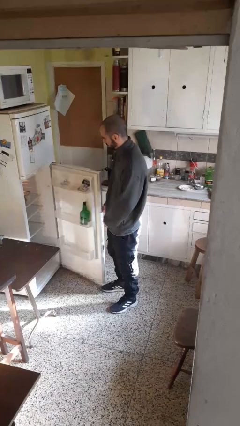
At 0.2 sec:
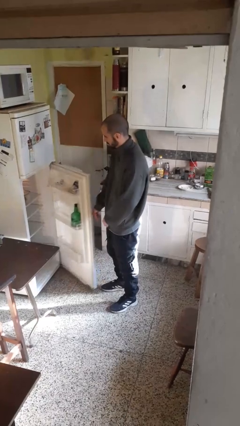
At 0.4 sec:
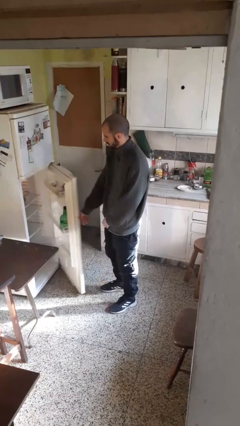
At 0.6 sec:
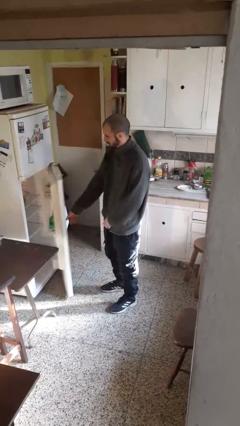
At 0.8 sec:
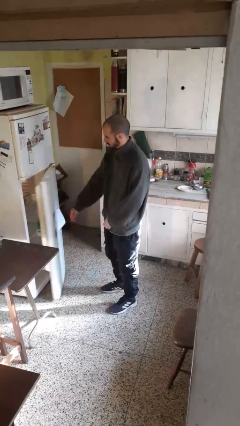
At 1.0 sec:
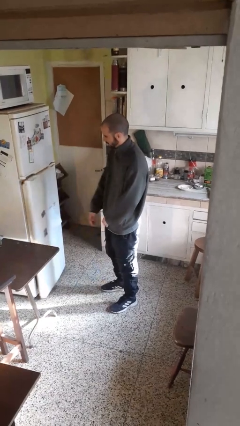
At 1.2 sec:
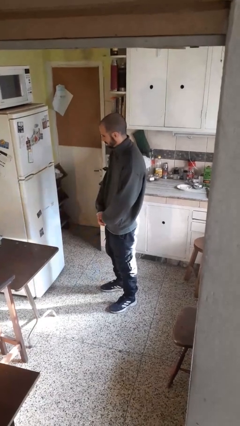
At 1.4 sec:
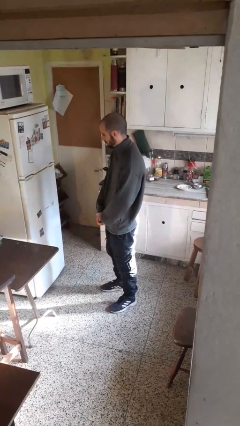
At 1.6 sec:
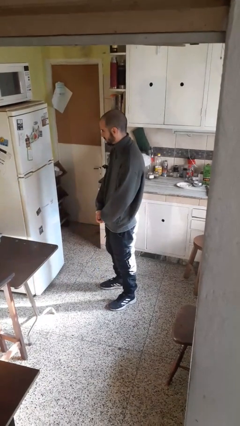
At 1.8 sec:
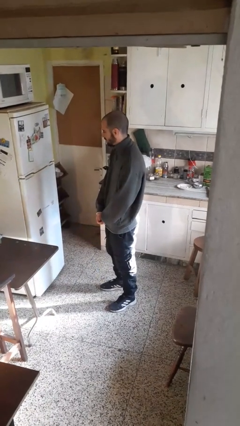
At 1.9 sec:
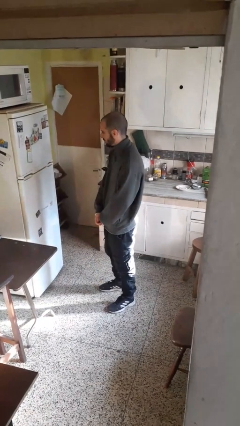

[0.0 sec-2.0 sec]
person closes refrigerator

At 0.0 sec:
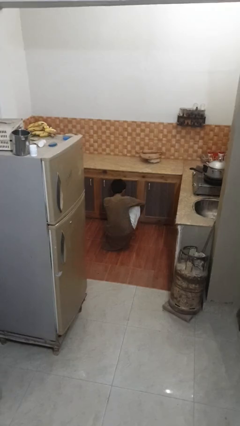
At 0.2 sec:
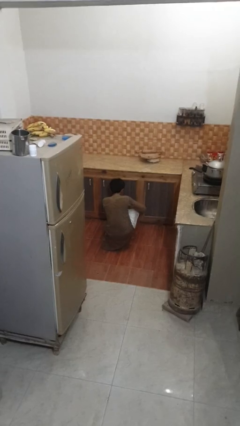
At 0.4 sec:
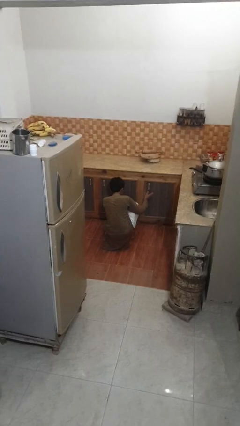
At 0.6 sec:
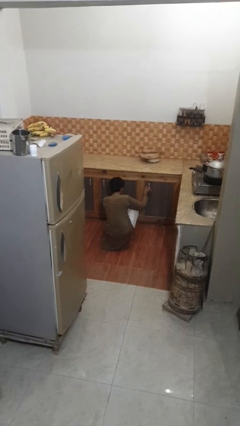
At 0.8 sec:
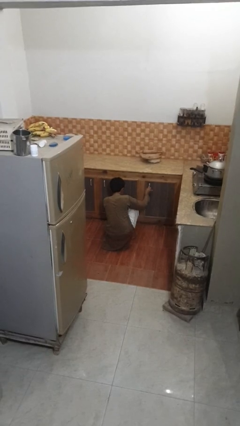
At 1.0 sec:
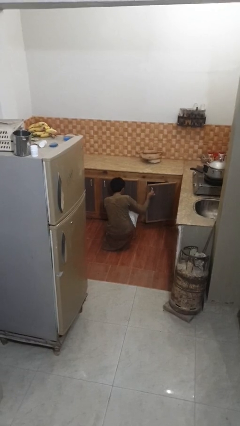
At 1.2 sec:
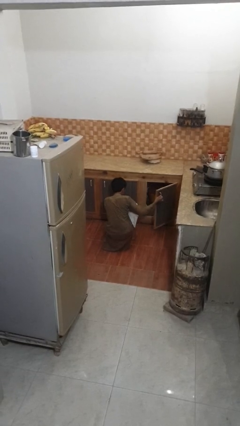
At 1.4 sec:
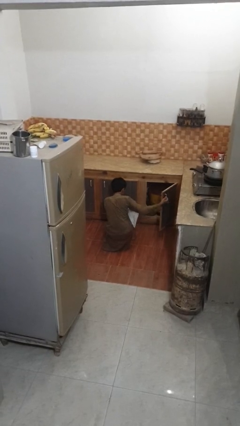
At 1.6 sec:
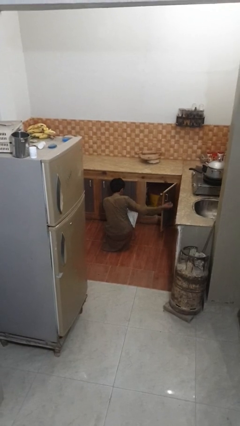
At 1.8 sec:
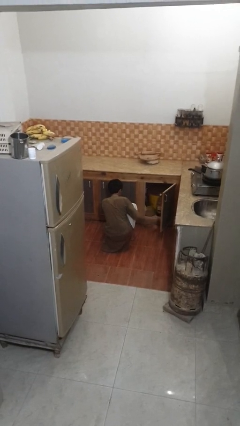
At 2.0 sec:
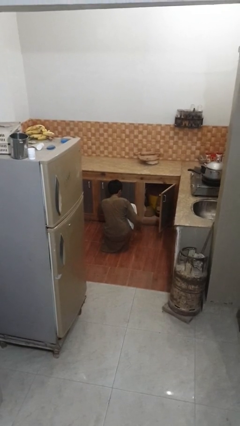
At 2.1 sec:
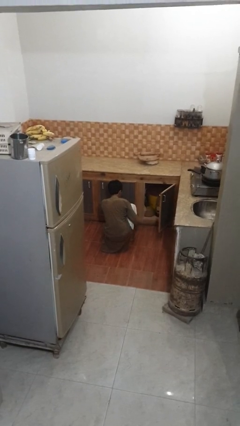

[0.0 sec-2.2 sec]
person opens kitchen drawer

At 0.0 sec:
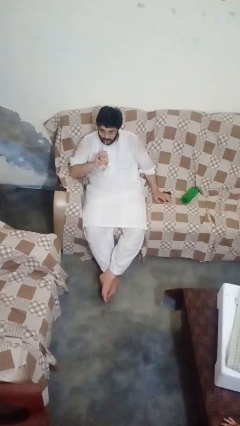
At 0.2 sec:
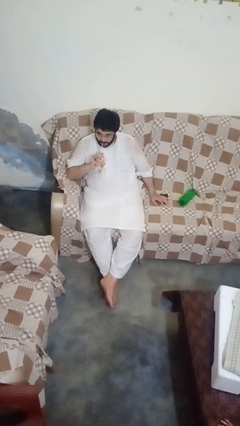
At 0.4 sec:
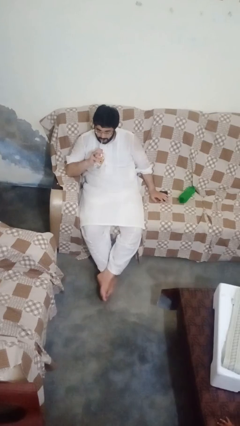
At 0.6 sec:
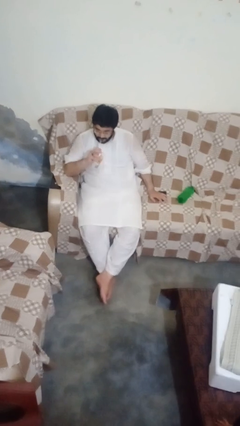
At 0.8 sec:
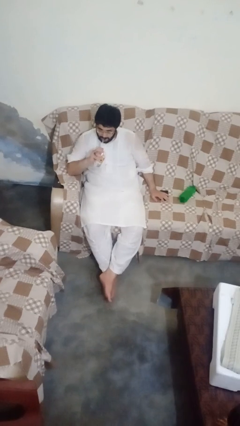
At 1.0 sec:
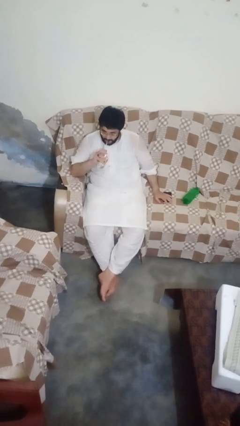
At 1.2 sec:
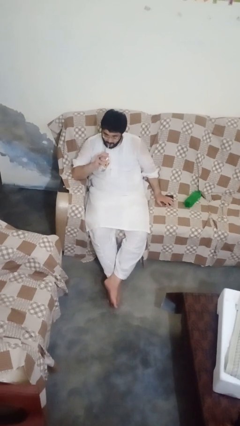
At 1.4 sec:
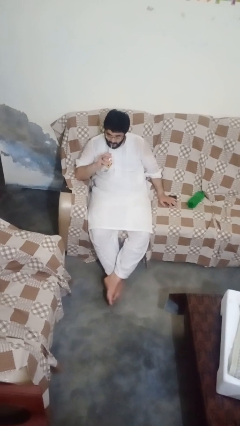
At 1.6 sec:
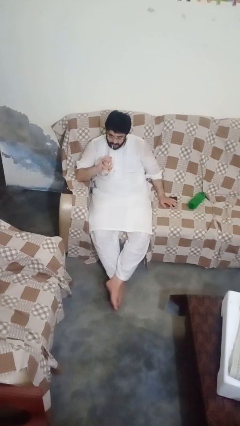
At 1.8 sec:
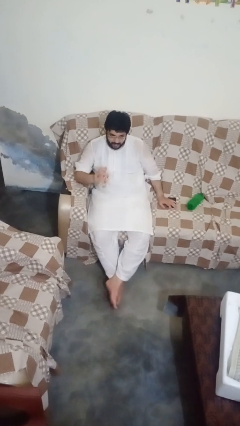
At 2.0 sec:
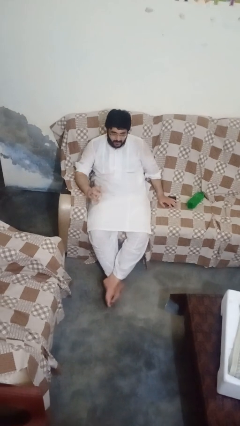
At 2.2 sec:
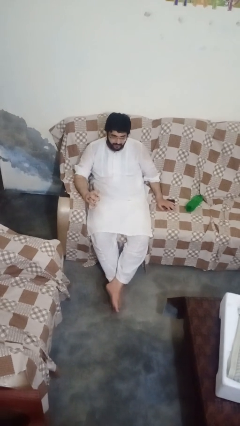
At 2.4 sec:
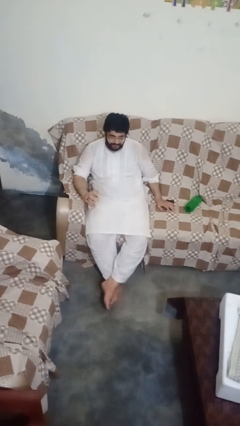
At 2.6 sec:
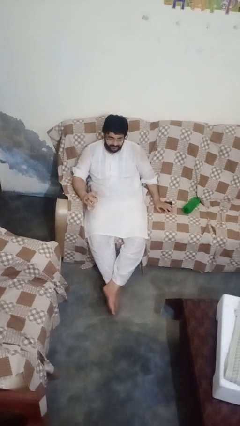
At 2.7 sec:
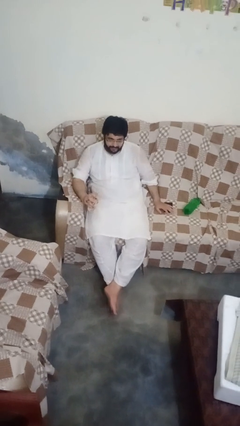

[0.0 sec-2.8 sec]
person drinks from straw

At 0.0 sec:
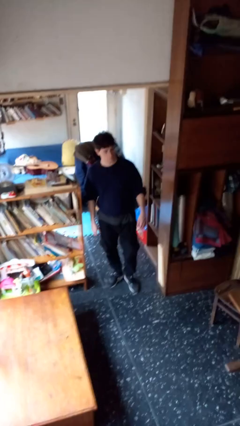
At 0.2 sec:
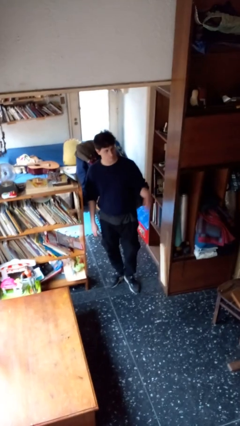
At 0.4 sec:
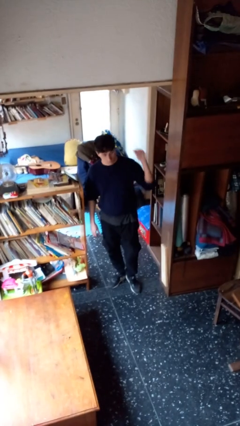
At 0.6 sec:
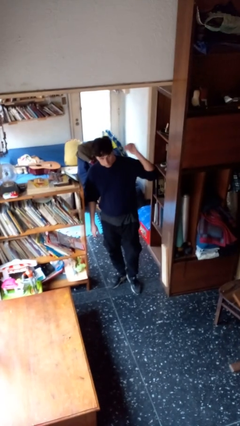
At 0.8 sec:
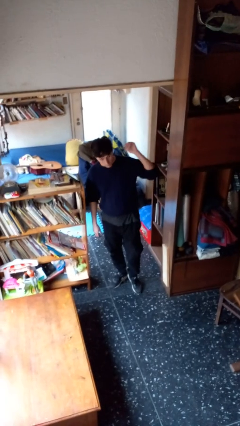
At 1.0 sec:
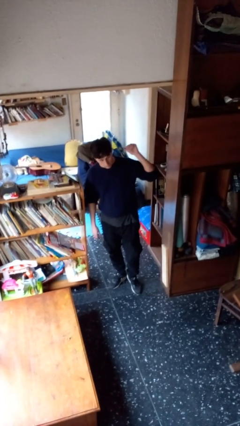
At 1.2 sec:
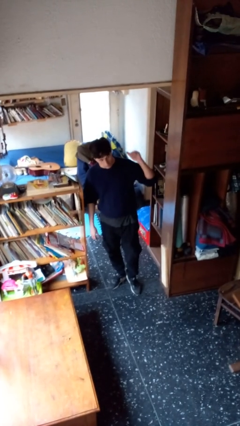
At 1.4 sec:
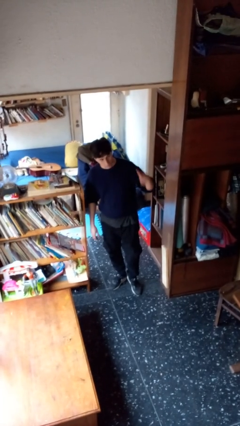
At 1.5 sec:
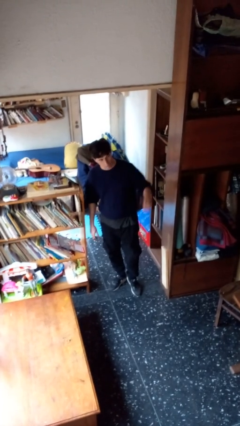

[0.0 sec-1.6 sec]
person gestures behind me

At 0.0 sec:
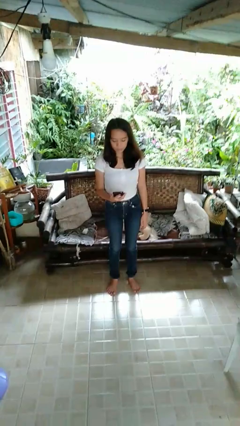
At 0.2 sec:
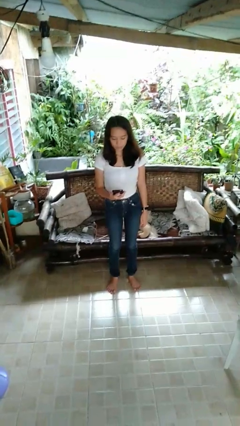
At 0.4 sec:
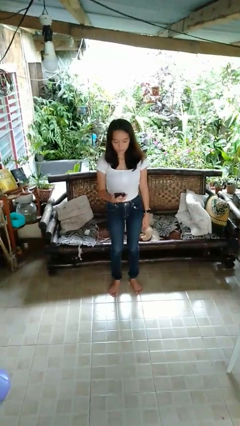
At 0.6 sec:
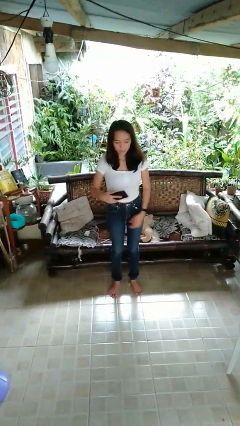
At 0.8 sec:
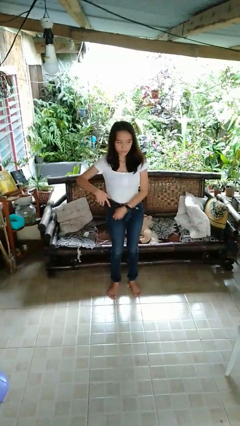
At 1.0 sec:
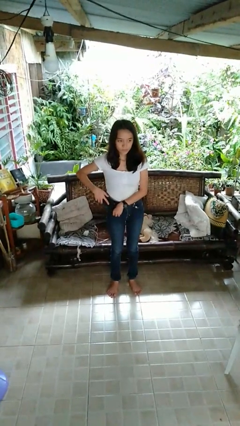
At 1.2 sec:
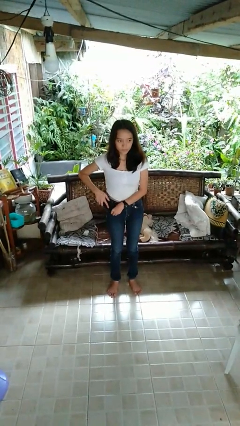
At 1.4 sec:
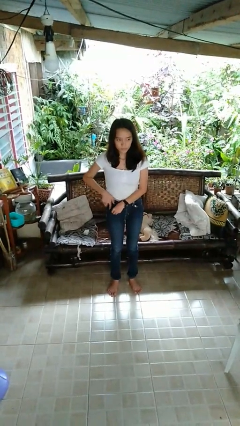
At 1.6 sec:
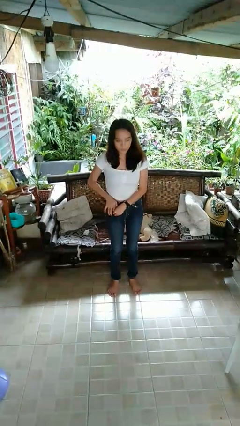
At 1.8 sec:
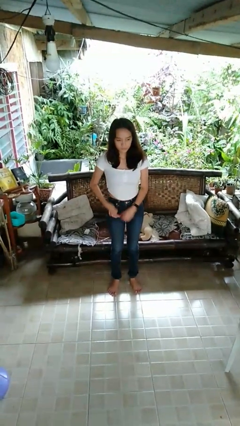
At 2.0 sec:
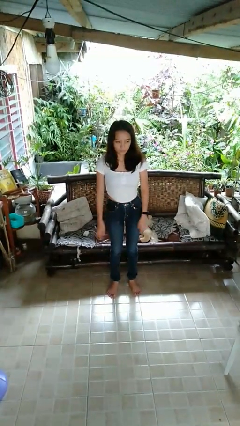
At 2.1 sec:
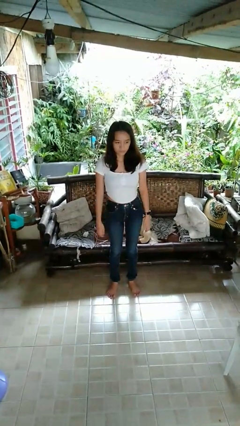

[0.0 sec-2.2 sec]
person puts phone into pocket

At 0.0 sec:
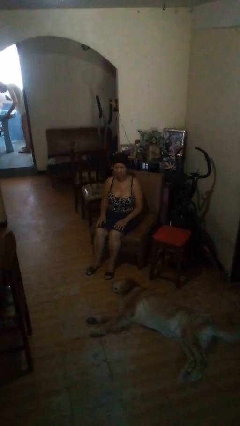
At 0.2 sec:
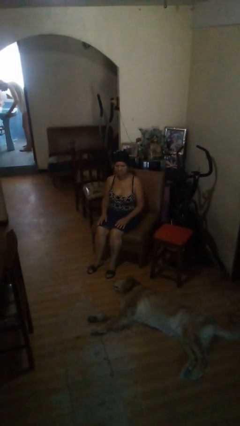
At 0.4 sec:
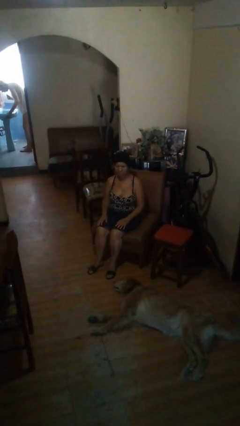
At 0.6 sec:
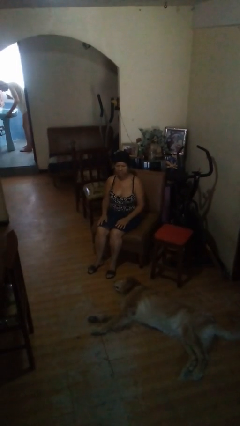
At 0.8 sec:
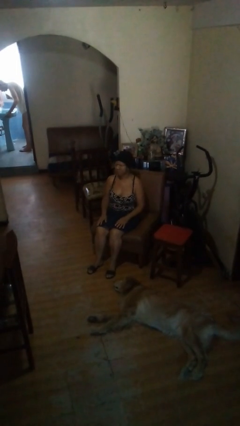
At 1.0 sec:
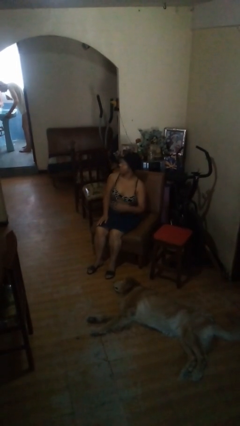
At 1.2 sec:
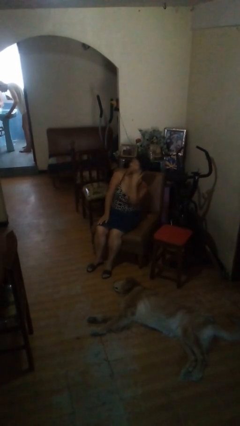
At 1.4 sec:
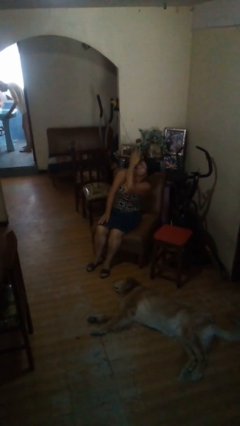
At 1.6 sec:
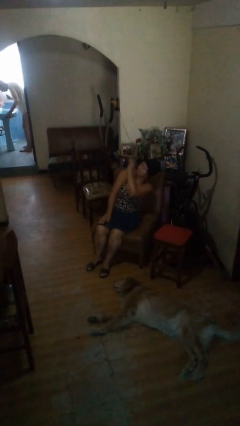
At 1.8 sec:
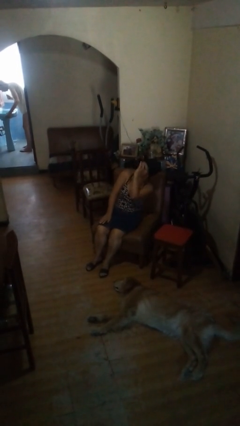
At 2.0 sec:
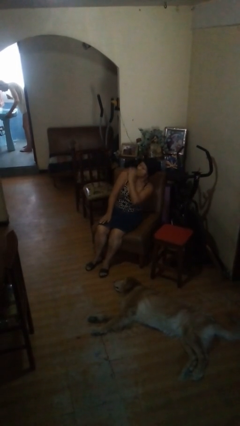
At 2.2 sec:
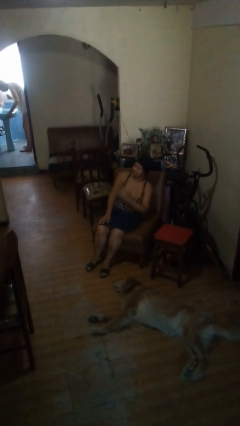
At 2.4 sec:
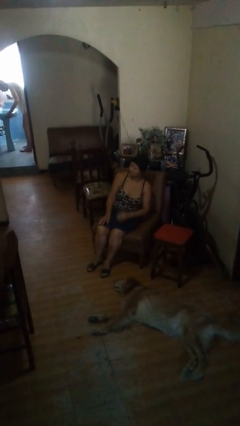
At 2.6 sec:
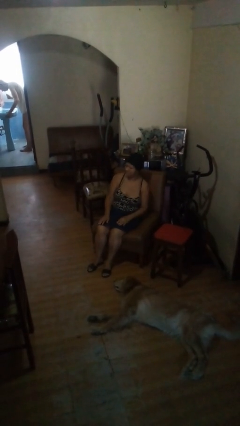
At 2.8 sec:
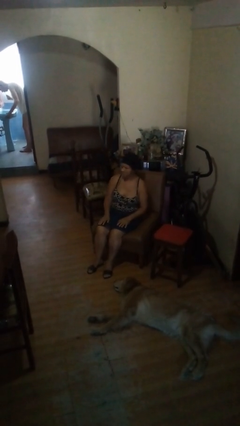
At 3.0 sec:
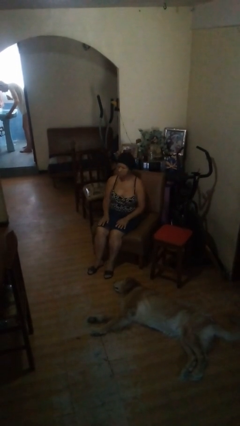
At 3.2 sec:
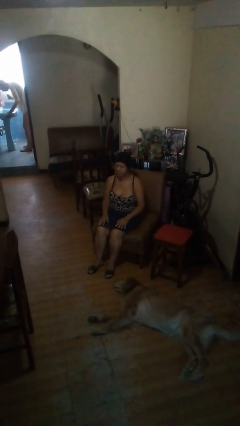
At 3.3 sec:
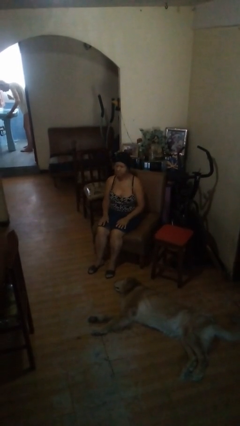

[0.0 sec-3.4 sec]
person swats bug

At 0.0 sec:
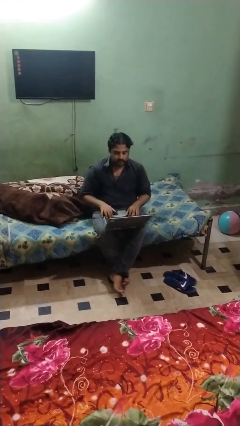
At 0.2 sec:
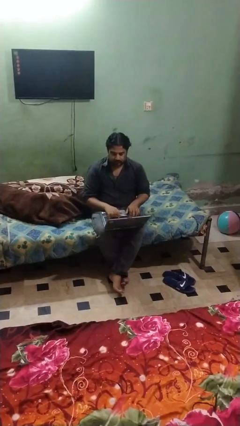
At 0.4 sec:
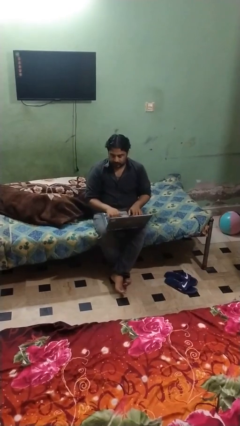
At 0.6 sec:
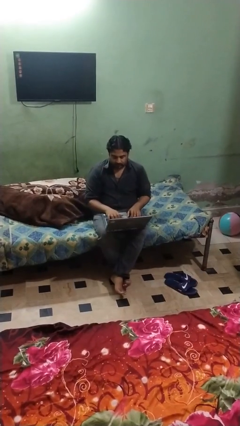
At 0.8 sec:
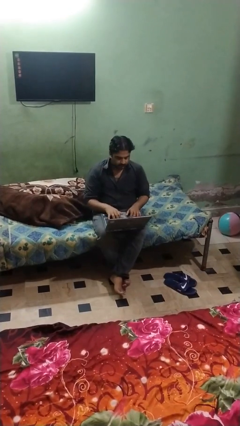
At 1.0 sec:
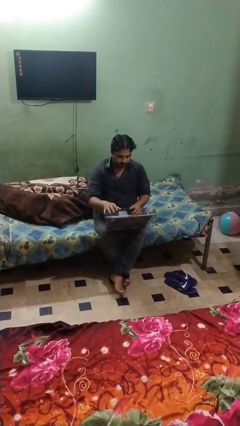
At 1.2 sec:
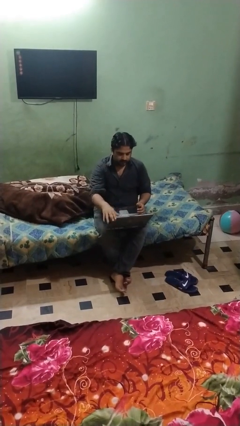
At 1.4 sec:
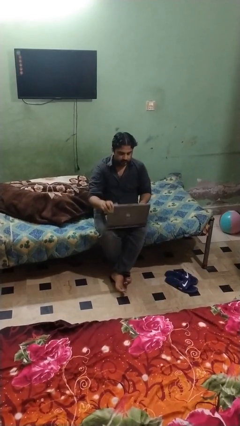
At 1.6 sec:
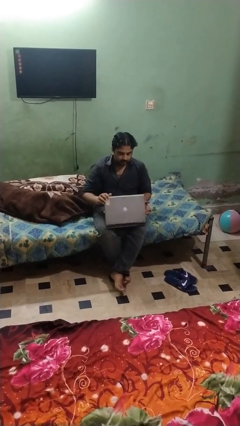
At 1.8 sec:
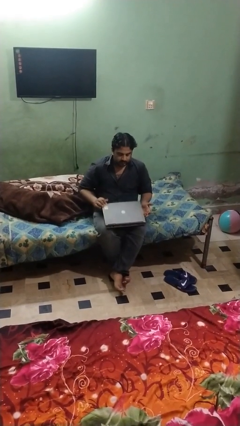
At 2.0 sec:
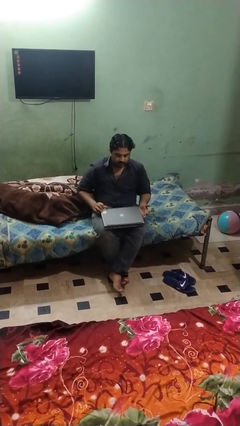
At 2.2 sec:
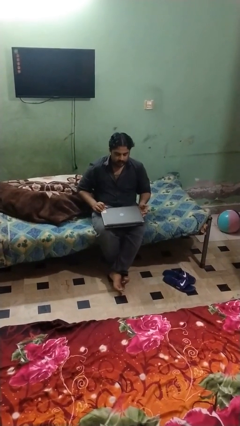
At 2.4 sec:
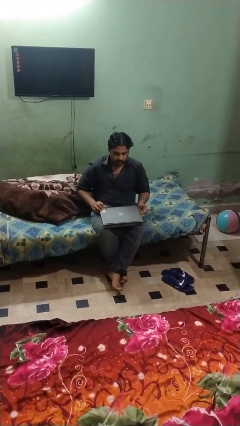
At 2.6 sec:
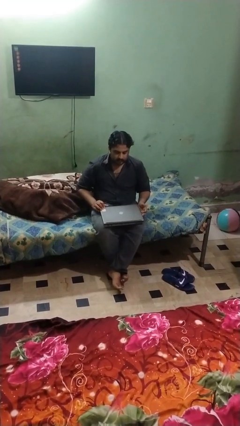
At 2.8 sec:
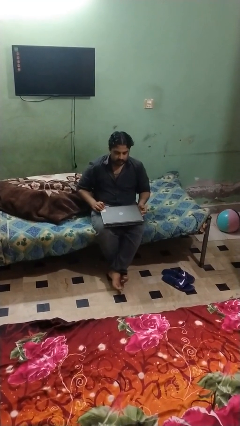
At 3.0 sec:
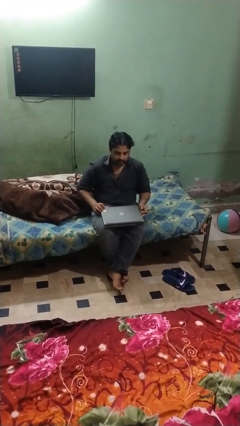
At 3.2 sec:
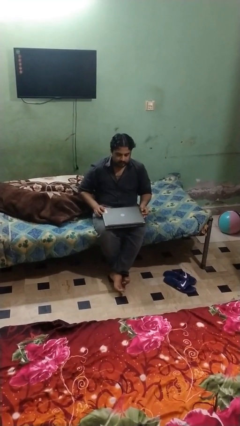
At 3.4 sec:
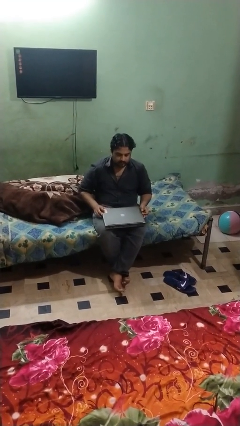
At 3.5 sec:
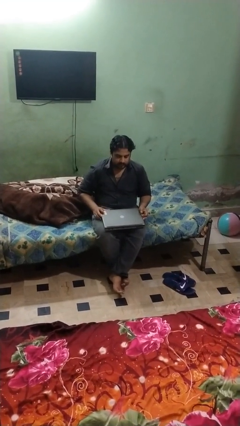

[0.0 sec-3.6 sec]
person closes laptop
